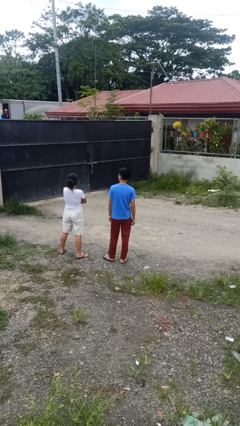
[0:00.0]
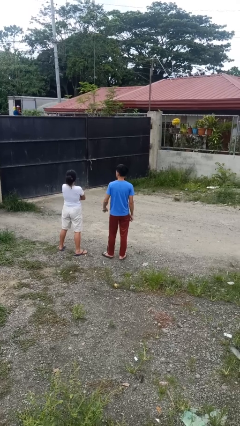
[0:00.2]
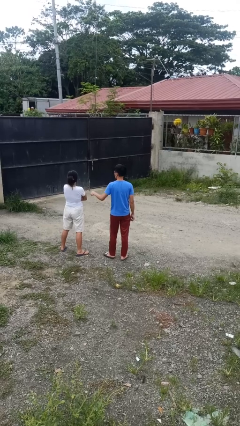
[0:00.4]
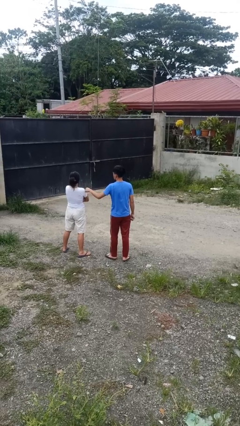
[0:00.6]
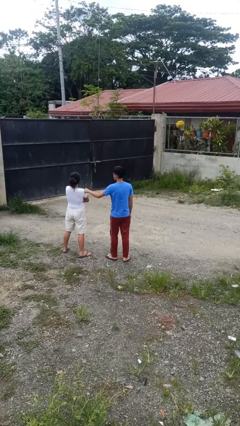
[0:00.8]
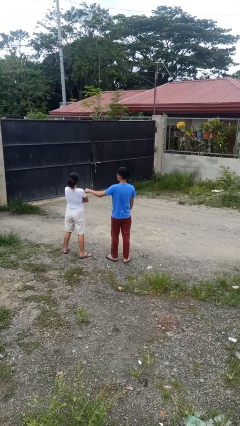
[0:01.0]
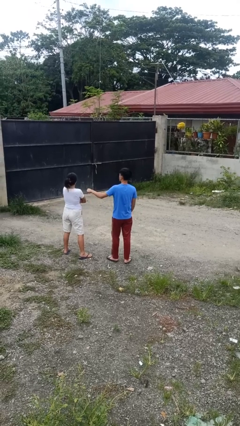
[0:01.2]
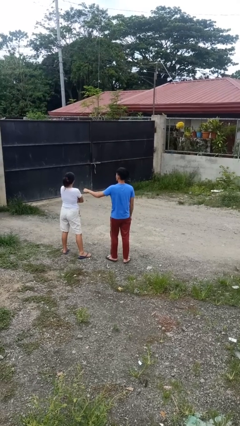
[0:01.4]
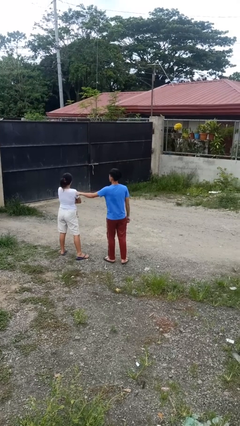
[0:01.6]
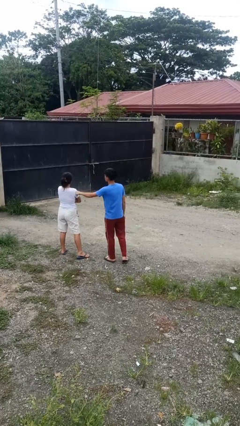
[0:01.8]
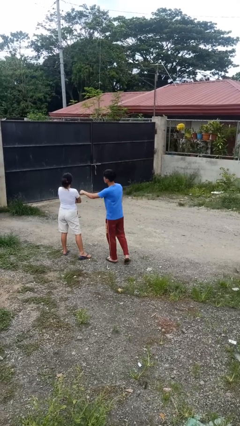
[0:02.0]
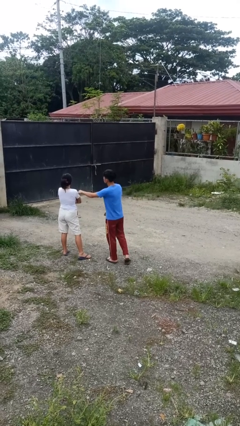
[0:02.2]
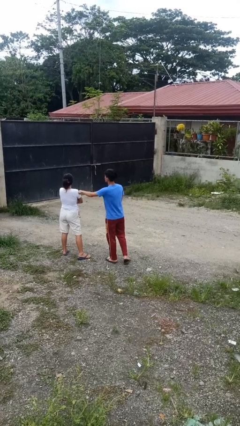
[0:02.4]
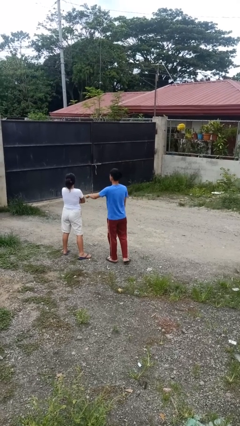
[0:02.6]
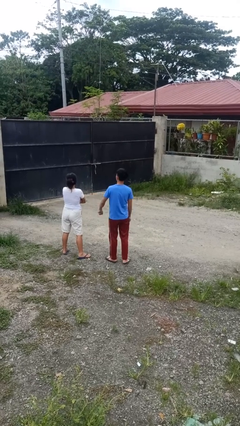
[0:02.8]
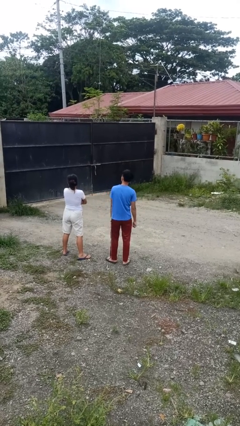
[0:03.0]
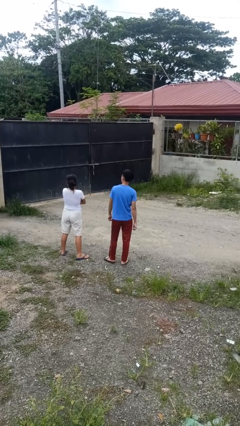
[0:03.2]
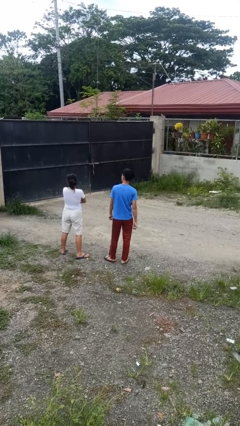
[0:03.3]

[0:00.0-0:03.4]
person pounds shoulders of person

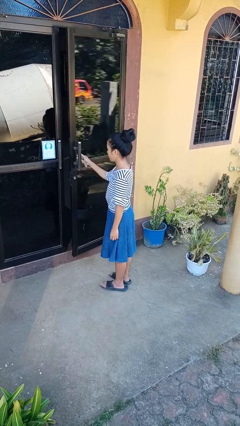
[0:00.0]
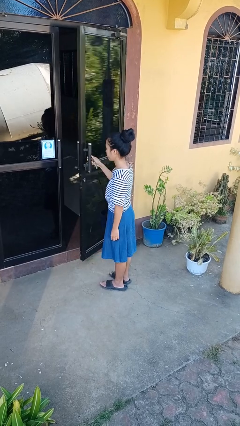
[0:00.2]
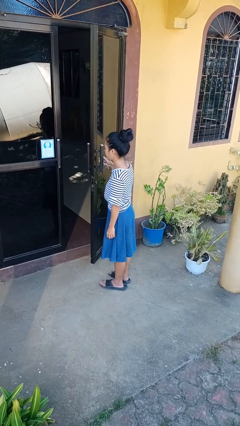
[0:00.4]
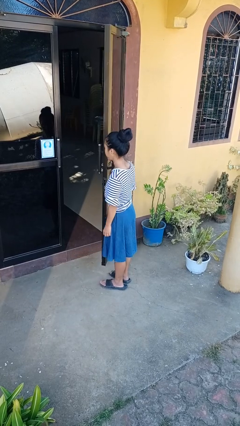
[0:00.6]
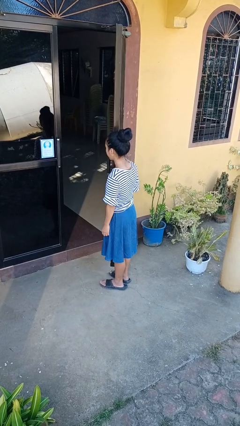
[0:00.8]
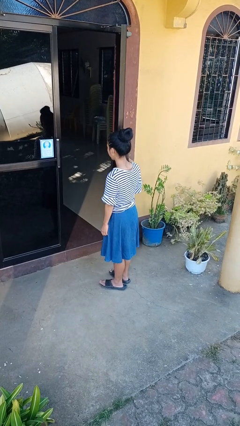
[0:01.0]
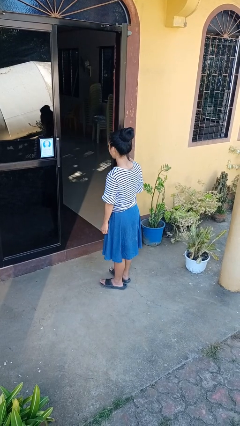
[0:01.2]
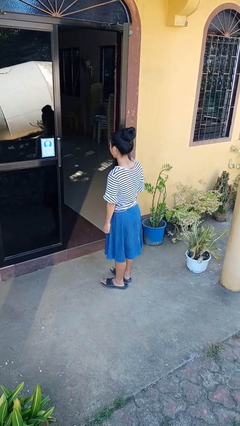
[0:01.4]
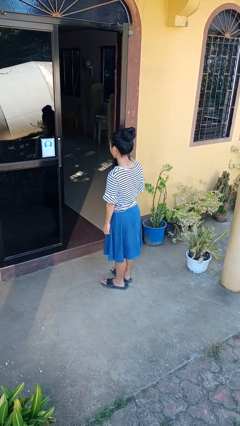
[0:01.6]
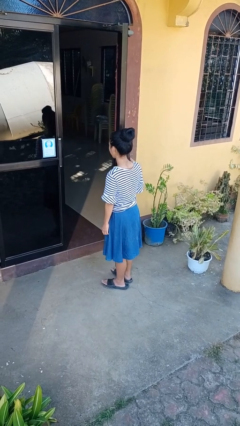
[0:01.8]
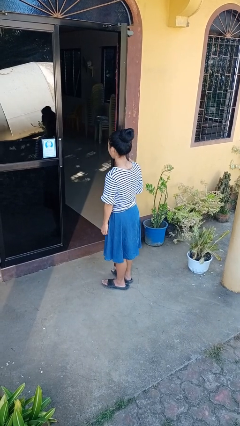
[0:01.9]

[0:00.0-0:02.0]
person opens facility door

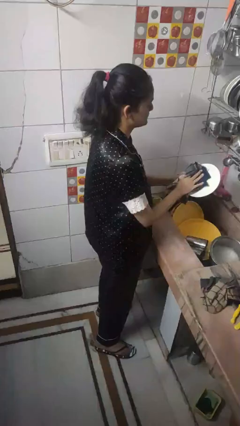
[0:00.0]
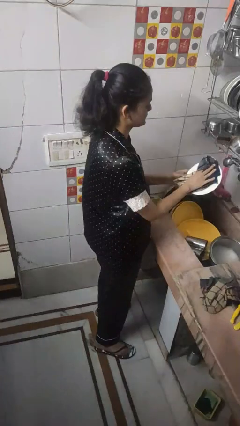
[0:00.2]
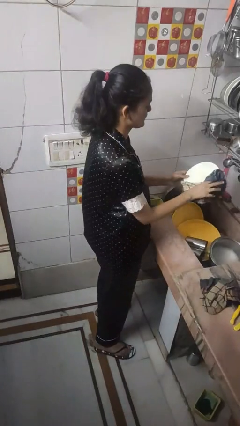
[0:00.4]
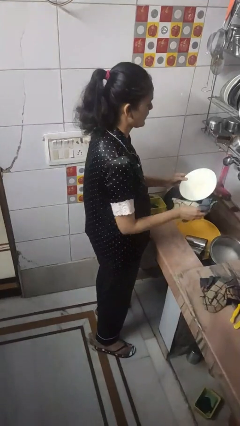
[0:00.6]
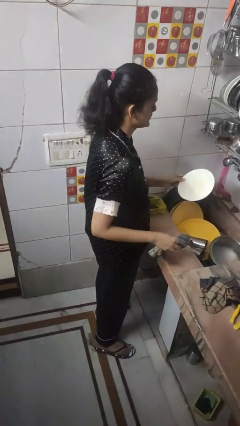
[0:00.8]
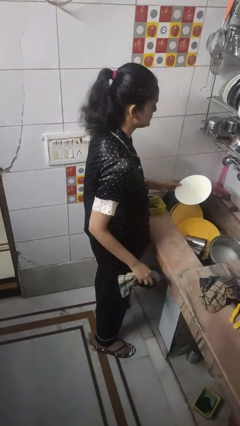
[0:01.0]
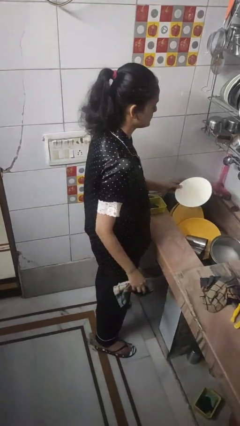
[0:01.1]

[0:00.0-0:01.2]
person dries dish

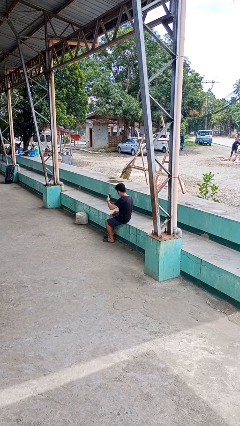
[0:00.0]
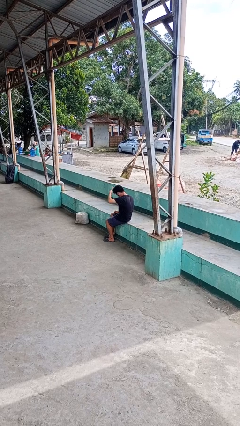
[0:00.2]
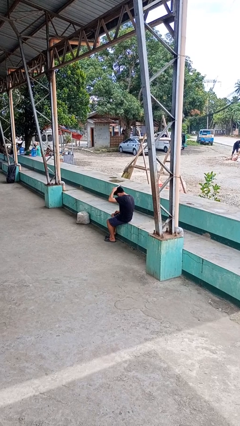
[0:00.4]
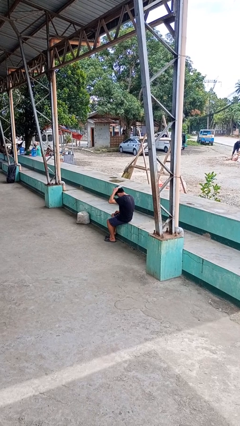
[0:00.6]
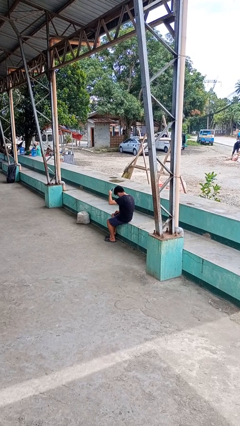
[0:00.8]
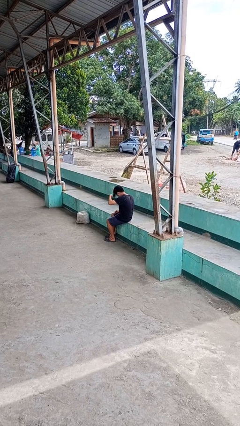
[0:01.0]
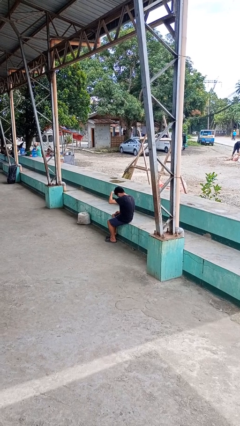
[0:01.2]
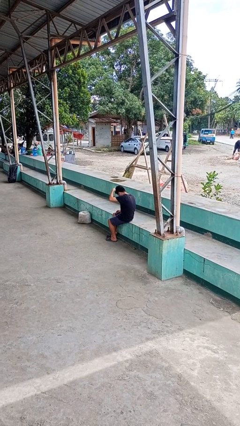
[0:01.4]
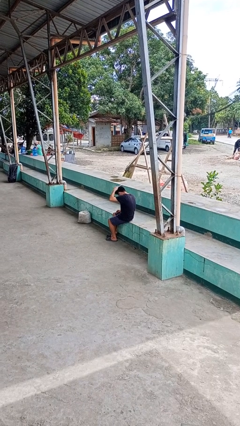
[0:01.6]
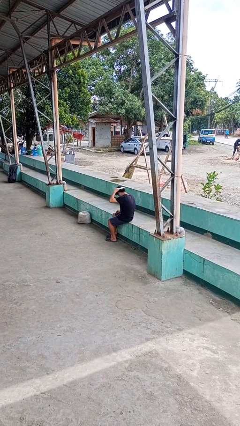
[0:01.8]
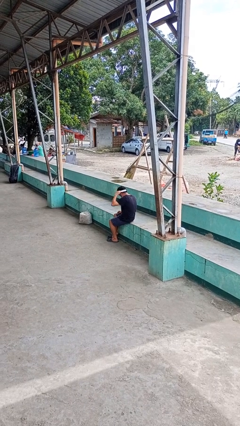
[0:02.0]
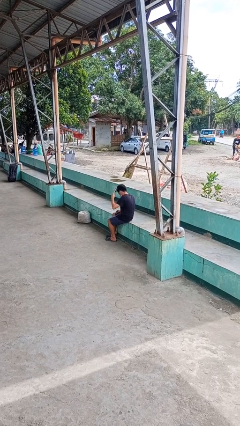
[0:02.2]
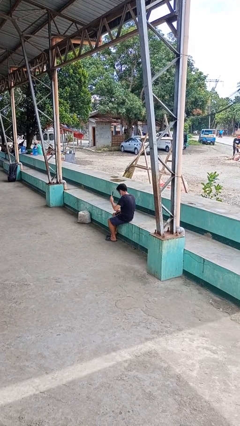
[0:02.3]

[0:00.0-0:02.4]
person brushes hair

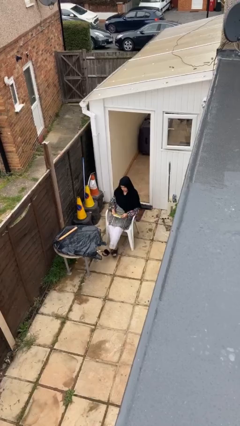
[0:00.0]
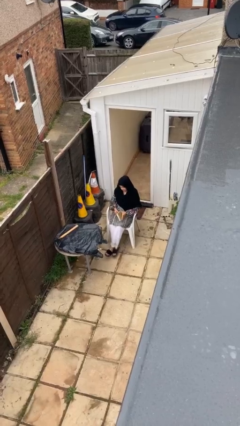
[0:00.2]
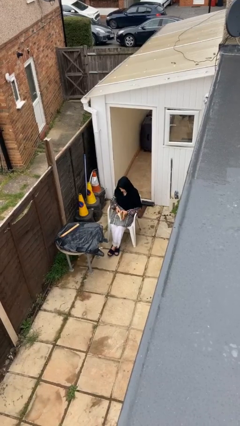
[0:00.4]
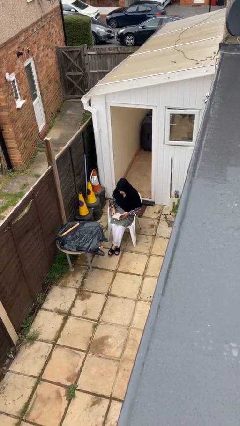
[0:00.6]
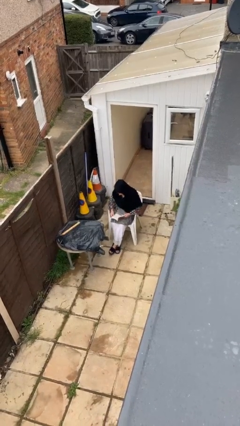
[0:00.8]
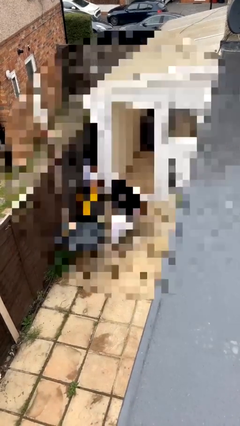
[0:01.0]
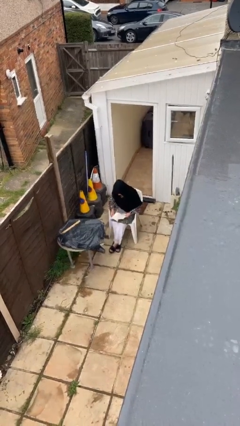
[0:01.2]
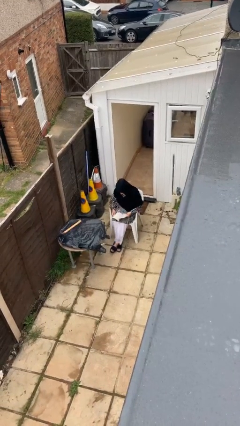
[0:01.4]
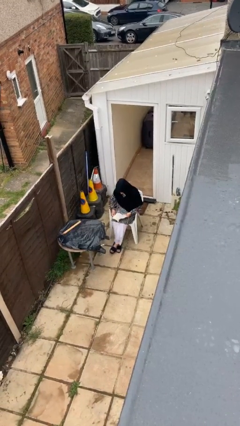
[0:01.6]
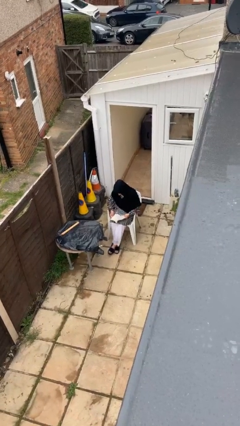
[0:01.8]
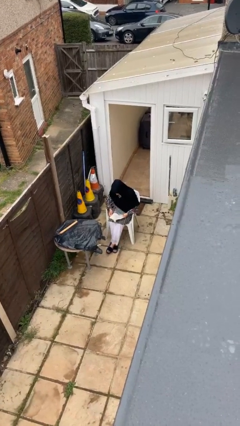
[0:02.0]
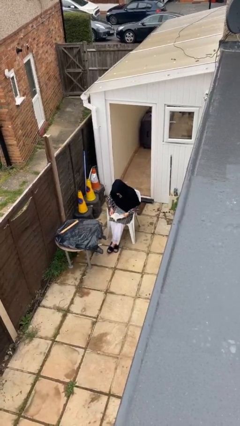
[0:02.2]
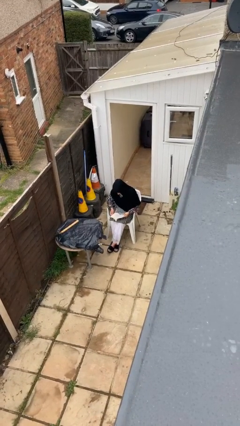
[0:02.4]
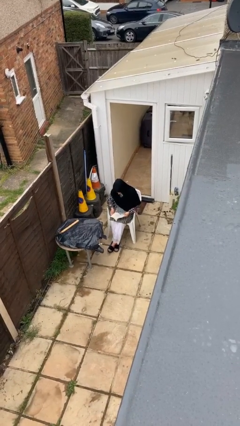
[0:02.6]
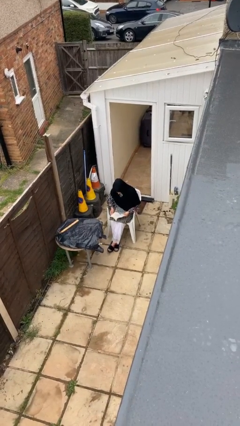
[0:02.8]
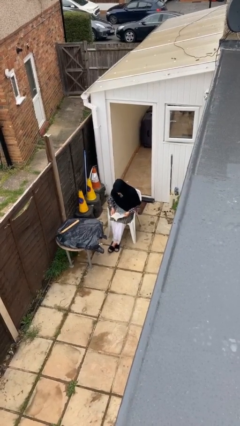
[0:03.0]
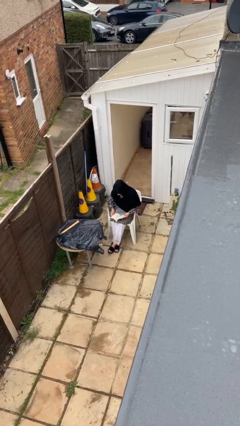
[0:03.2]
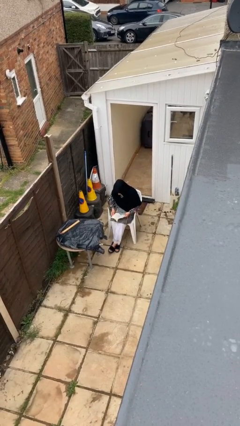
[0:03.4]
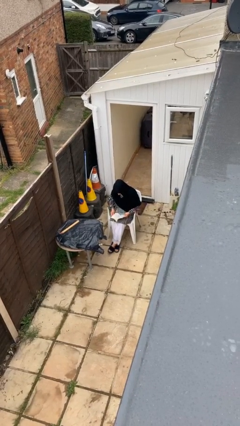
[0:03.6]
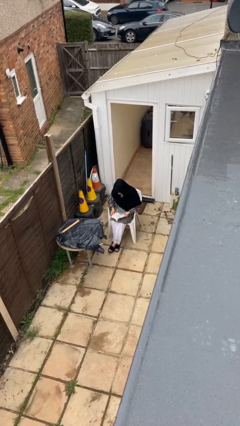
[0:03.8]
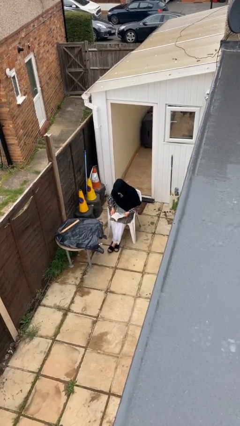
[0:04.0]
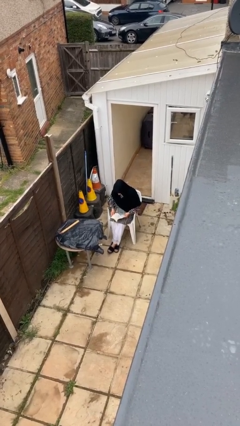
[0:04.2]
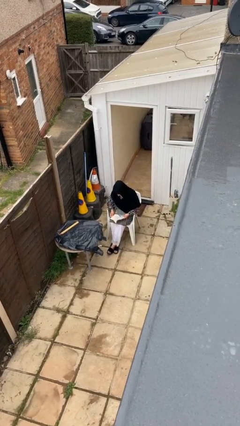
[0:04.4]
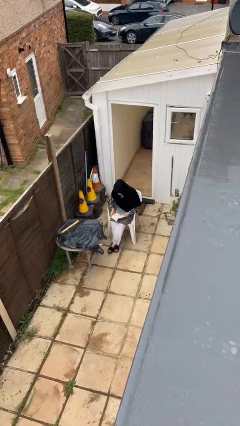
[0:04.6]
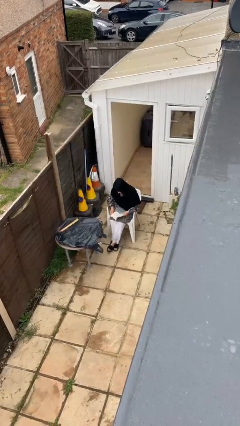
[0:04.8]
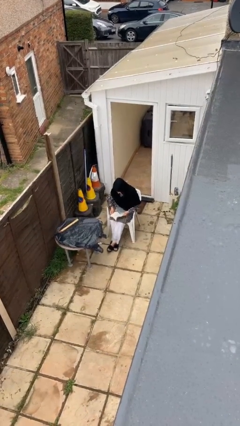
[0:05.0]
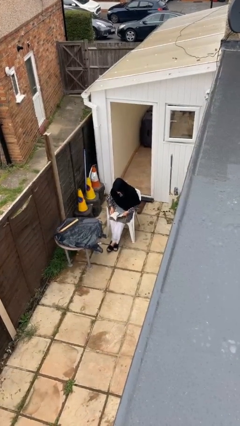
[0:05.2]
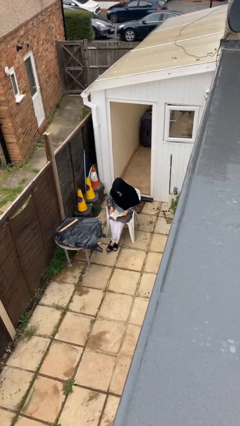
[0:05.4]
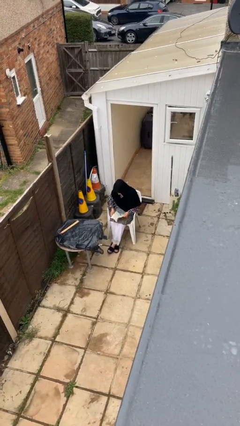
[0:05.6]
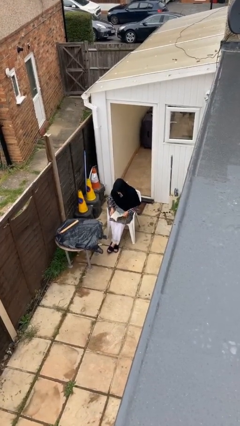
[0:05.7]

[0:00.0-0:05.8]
person reads document

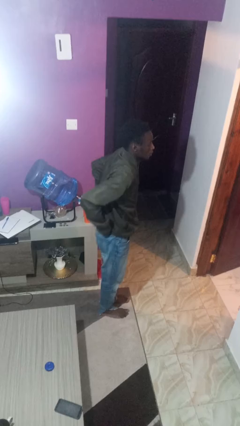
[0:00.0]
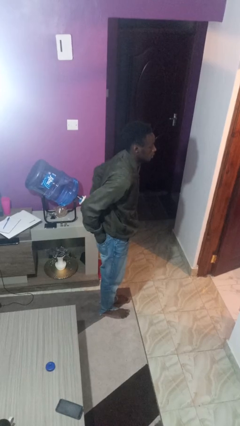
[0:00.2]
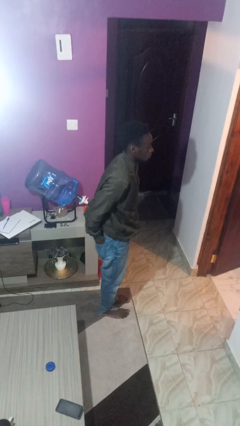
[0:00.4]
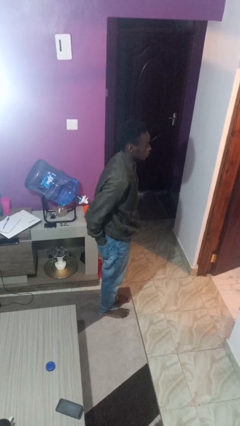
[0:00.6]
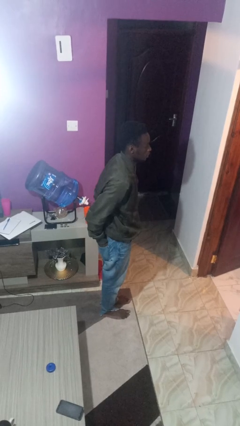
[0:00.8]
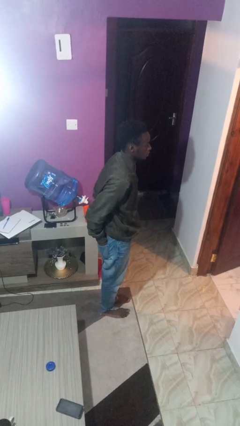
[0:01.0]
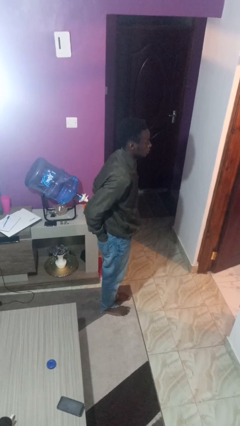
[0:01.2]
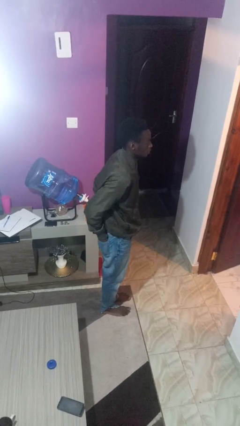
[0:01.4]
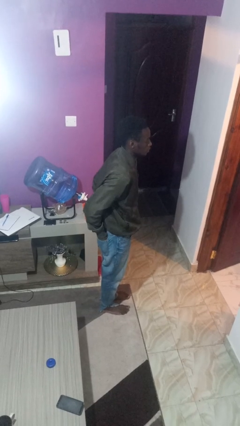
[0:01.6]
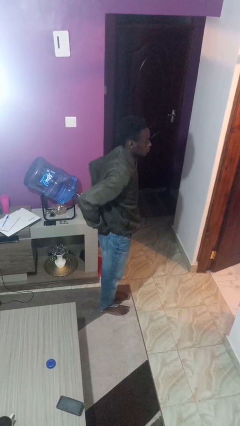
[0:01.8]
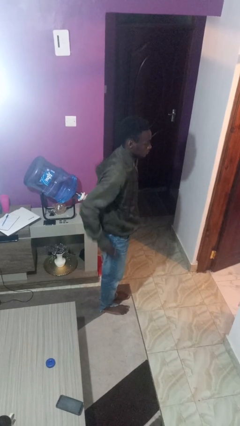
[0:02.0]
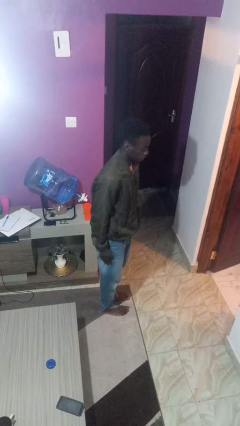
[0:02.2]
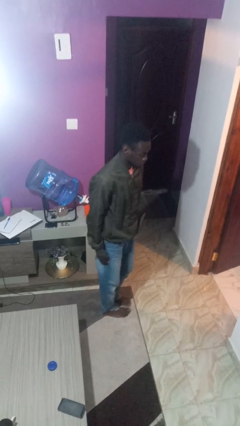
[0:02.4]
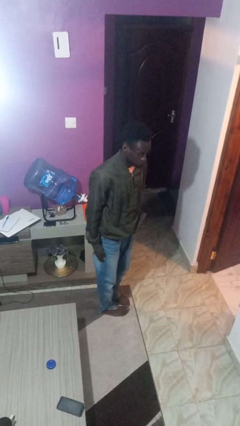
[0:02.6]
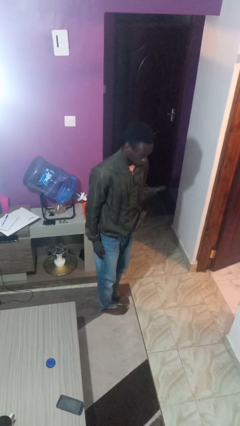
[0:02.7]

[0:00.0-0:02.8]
person puts hands in back pockets
